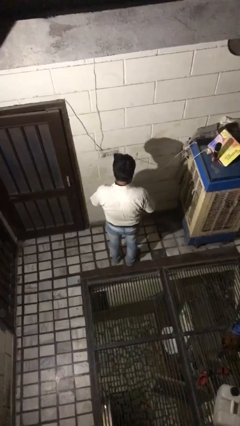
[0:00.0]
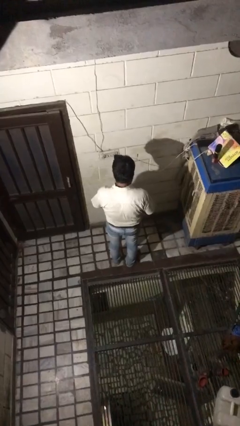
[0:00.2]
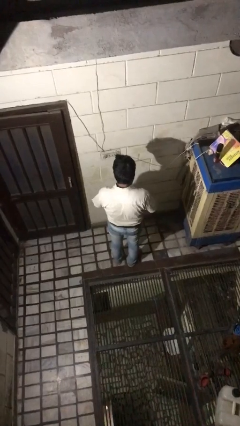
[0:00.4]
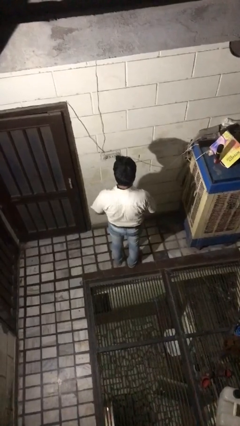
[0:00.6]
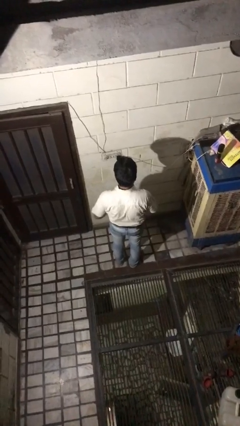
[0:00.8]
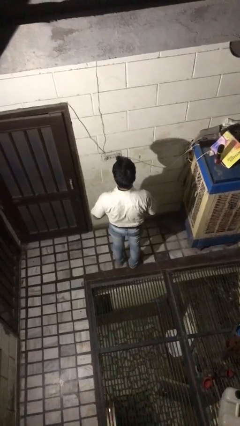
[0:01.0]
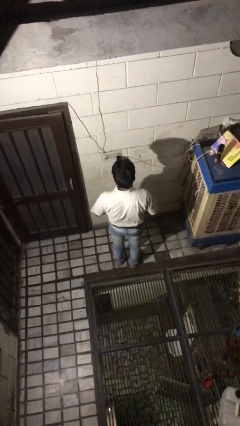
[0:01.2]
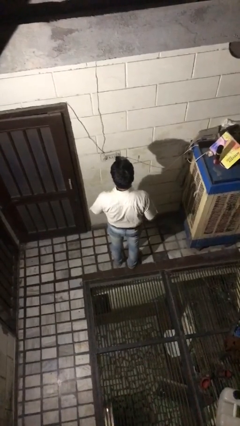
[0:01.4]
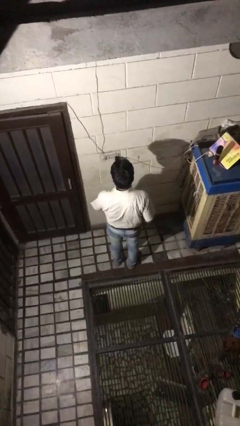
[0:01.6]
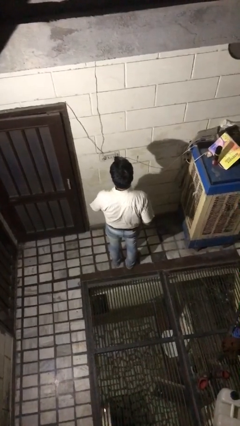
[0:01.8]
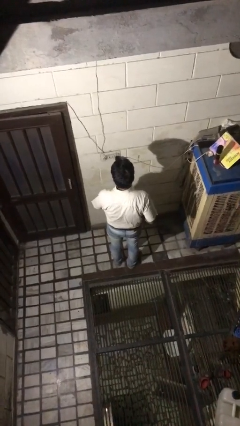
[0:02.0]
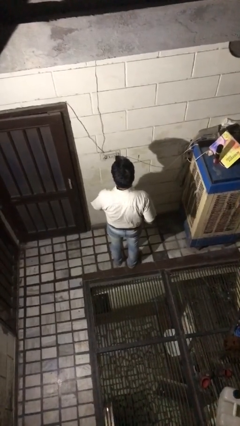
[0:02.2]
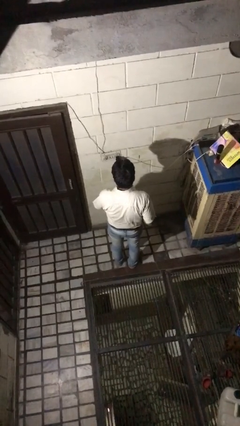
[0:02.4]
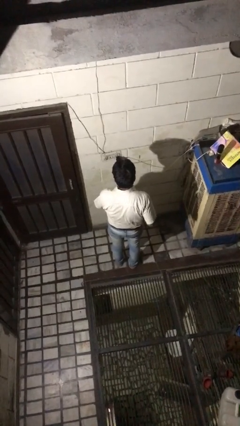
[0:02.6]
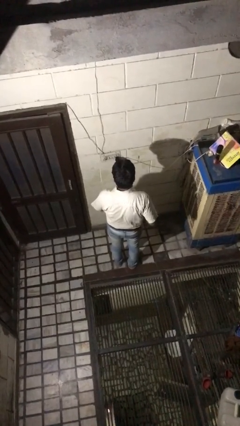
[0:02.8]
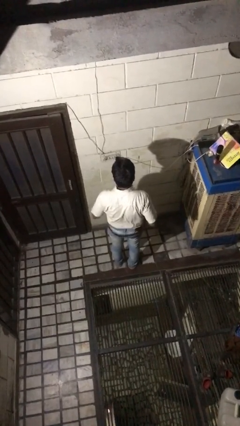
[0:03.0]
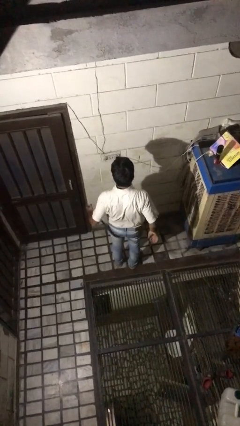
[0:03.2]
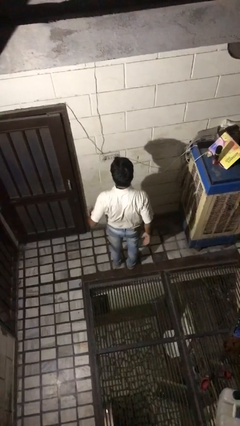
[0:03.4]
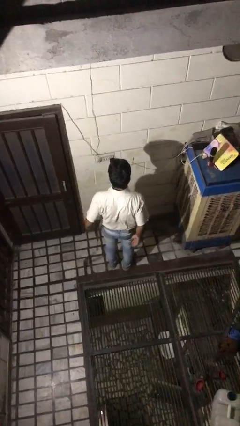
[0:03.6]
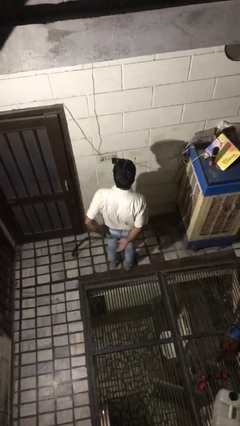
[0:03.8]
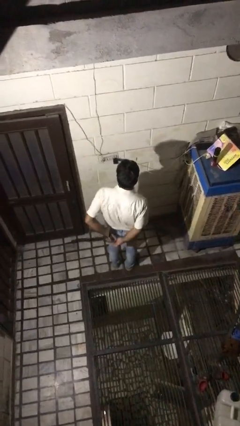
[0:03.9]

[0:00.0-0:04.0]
person takes off belt

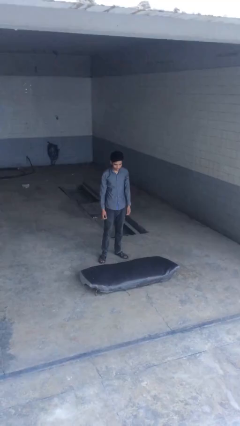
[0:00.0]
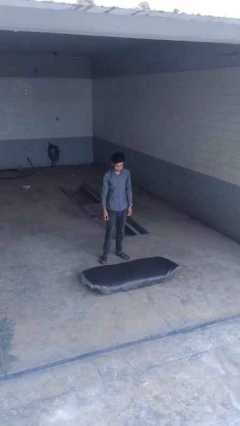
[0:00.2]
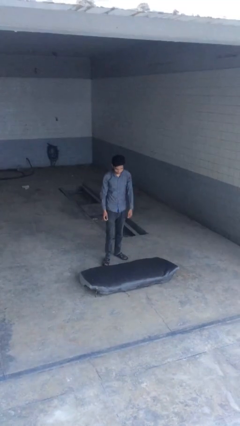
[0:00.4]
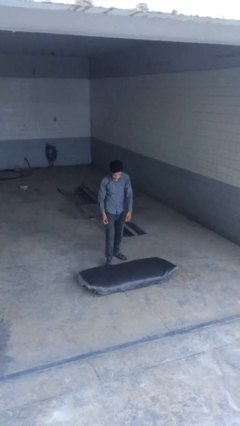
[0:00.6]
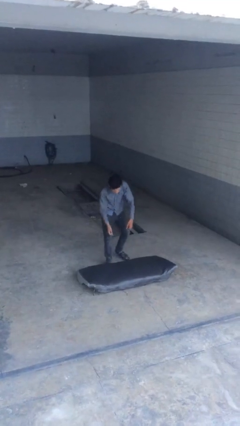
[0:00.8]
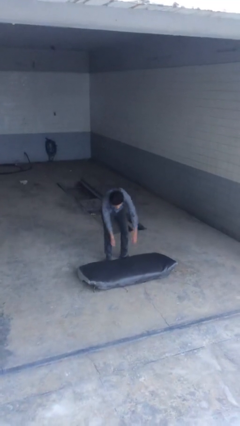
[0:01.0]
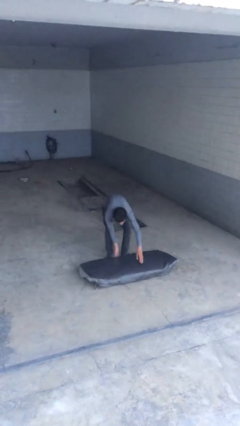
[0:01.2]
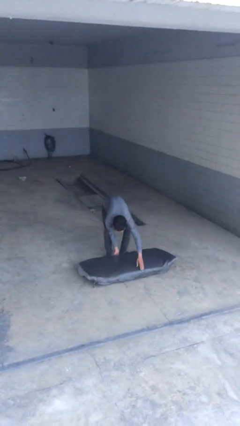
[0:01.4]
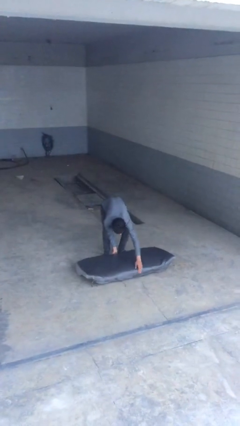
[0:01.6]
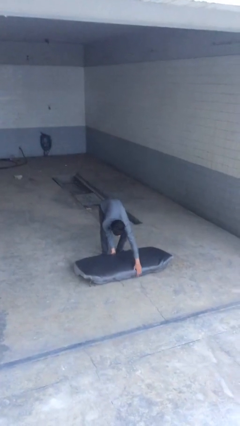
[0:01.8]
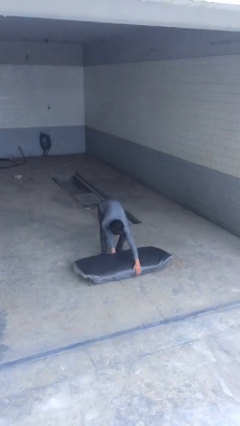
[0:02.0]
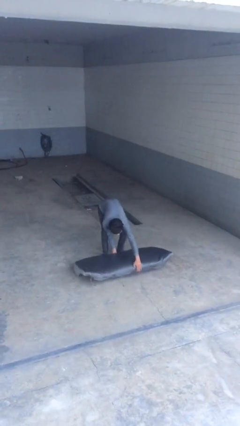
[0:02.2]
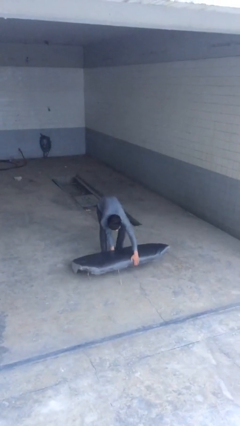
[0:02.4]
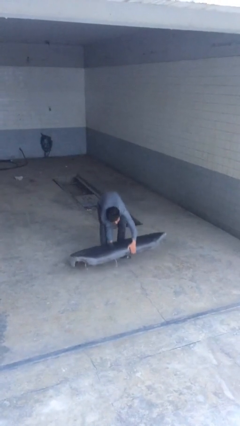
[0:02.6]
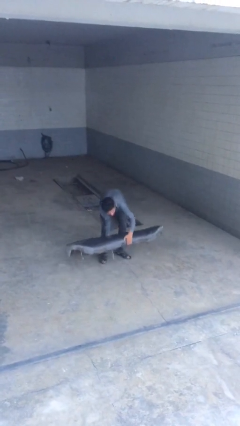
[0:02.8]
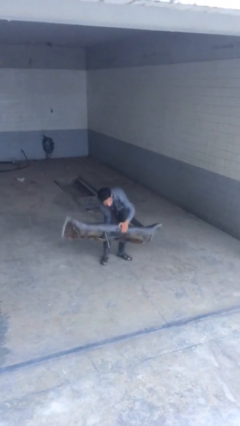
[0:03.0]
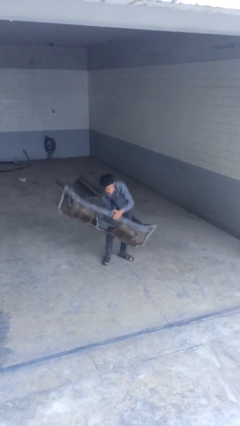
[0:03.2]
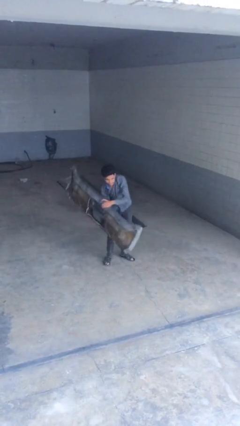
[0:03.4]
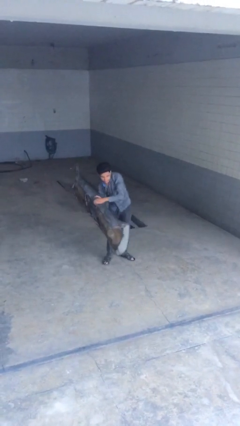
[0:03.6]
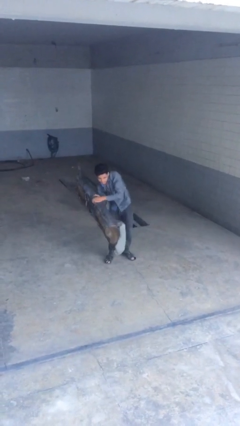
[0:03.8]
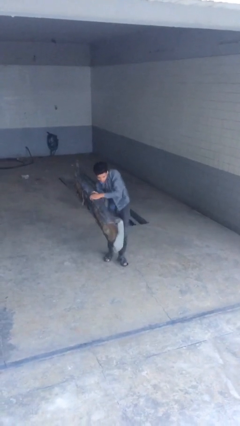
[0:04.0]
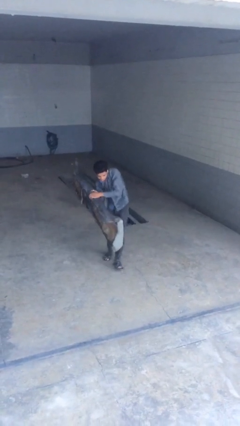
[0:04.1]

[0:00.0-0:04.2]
person picks up object from floor

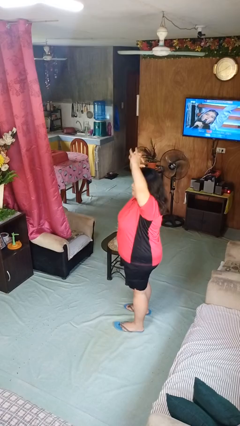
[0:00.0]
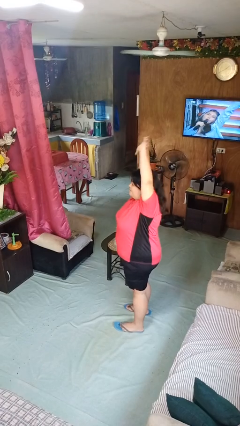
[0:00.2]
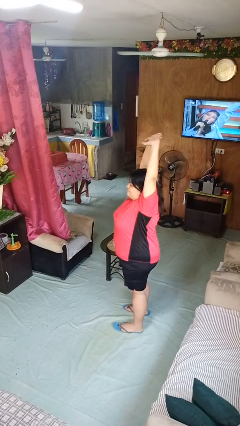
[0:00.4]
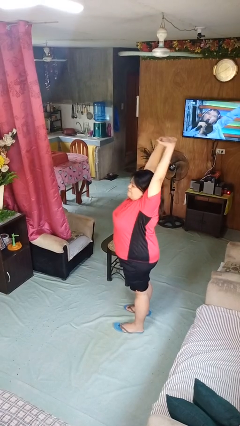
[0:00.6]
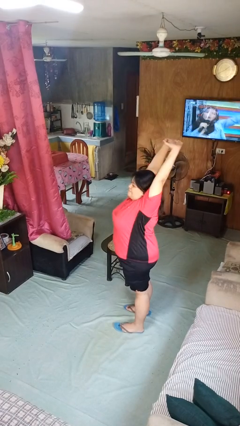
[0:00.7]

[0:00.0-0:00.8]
person stretches arms over head

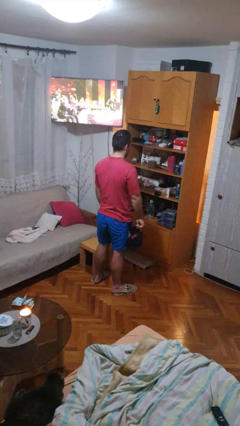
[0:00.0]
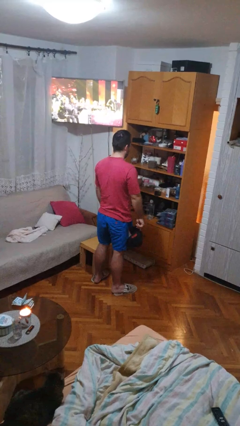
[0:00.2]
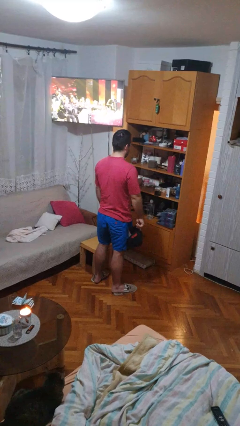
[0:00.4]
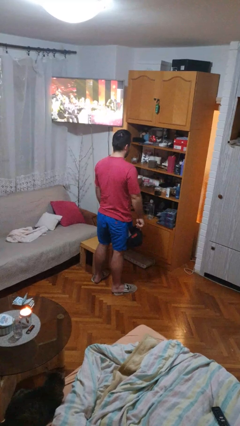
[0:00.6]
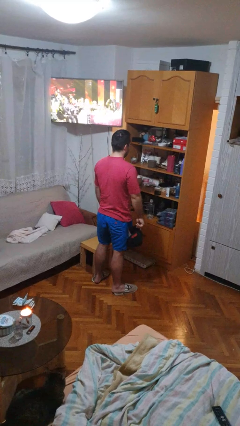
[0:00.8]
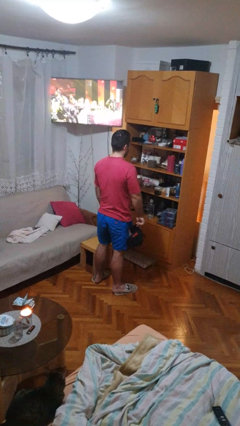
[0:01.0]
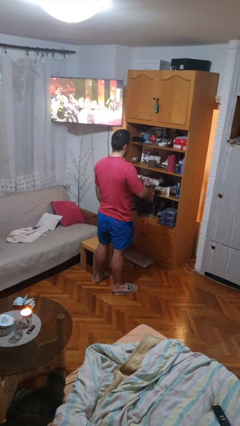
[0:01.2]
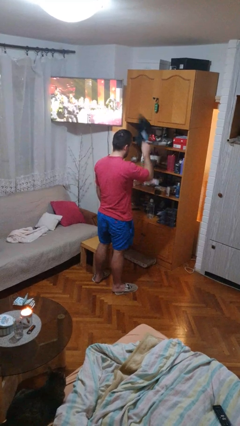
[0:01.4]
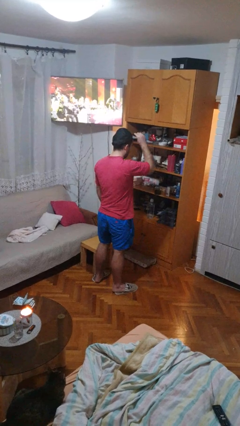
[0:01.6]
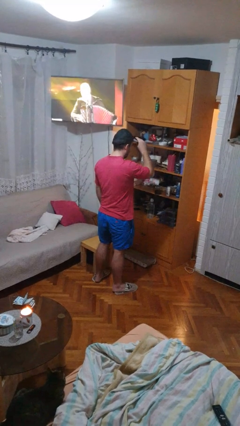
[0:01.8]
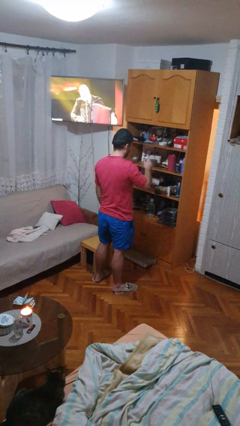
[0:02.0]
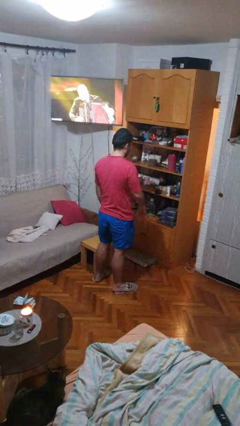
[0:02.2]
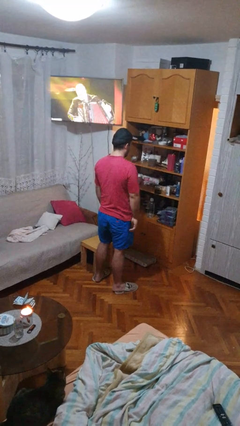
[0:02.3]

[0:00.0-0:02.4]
person puts on hat

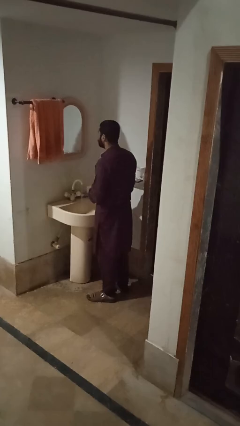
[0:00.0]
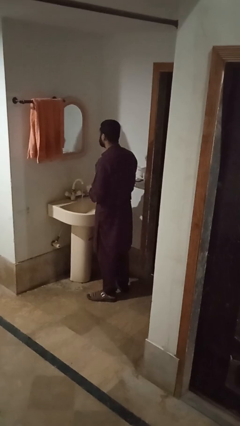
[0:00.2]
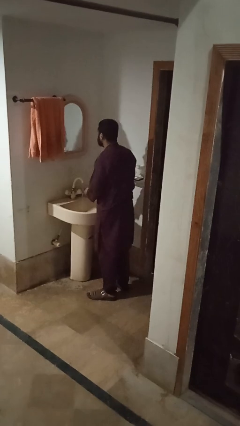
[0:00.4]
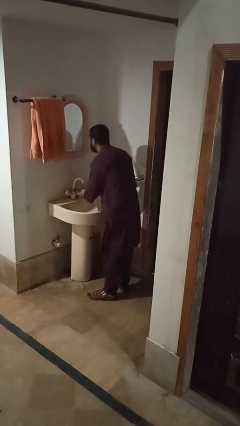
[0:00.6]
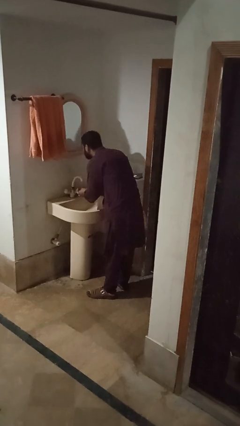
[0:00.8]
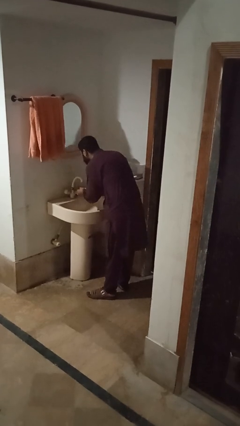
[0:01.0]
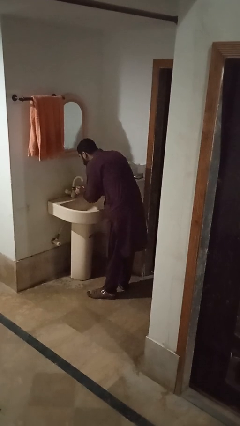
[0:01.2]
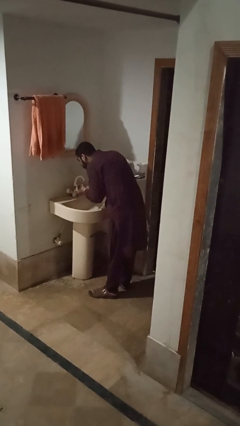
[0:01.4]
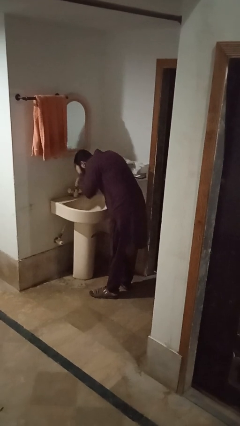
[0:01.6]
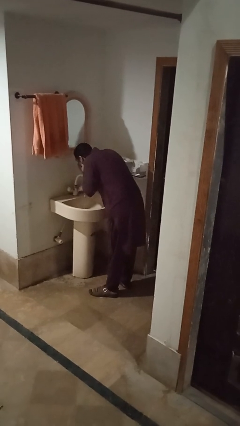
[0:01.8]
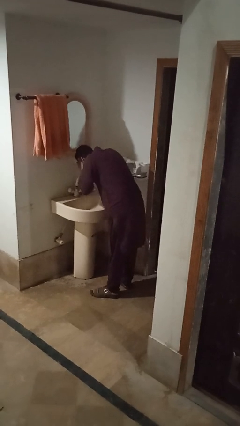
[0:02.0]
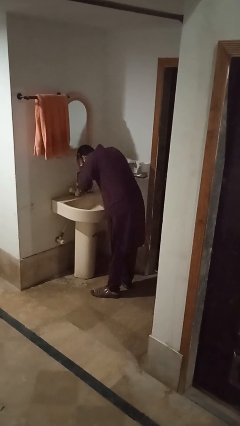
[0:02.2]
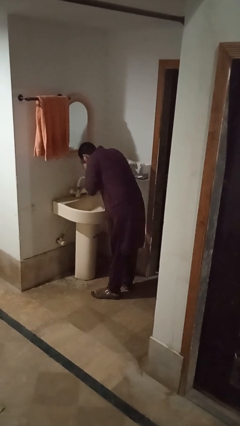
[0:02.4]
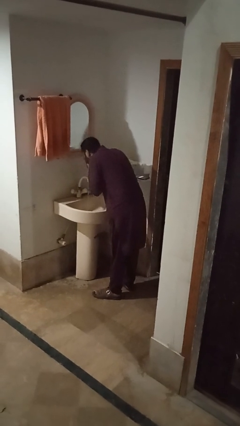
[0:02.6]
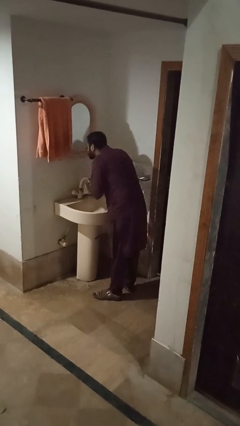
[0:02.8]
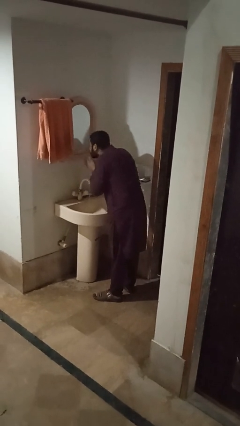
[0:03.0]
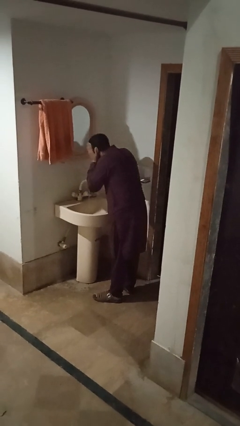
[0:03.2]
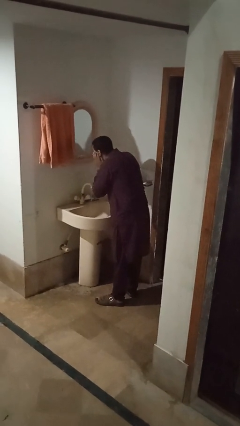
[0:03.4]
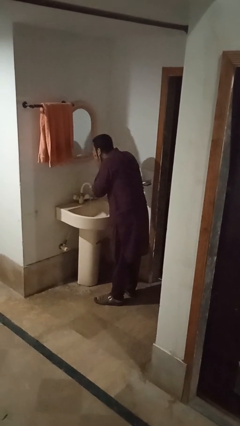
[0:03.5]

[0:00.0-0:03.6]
person washes face

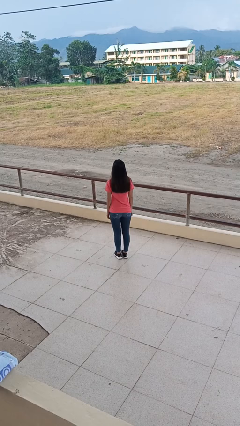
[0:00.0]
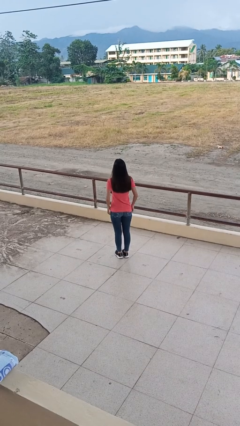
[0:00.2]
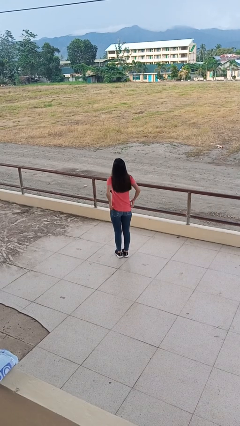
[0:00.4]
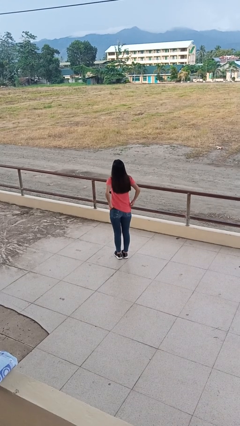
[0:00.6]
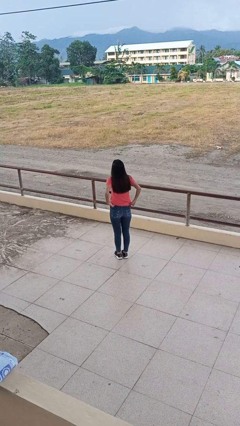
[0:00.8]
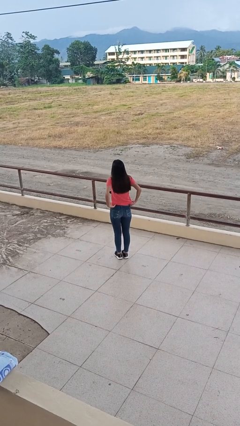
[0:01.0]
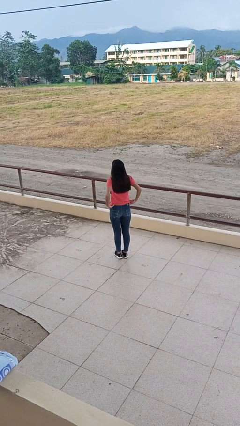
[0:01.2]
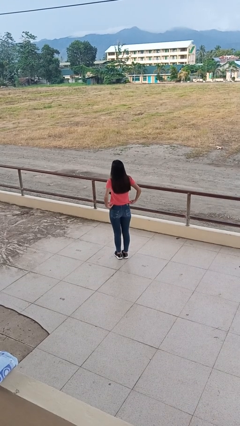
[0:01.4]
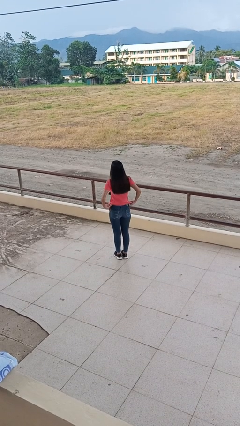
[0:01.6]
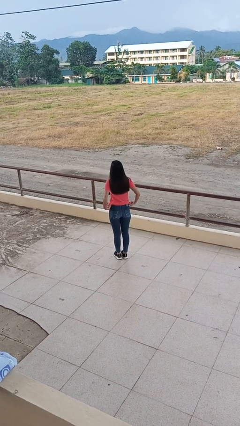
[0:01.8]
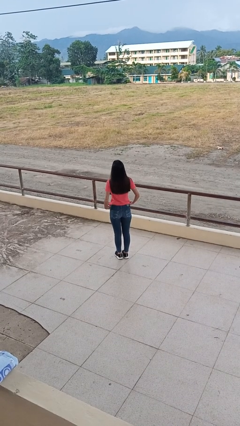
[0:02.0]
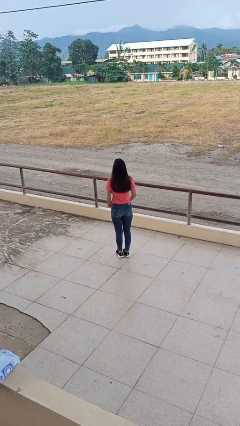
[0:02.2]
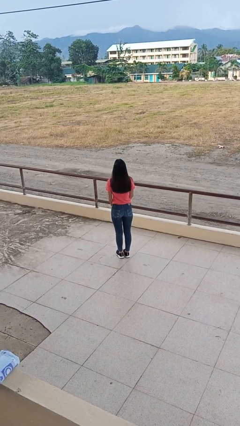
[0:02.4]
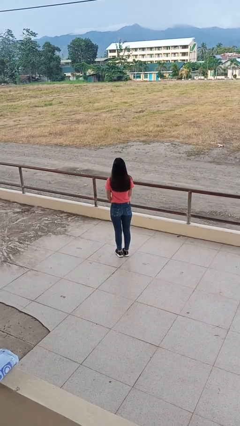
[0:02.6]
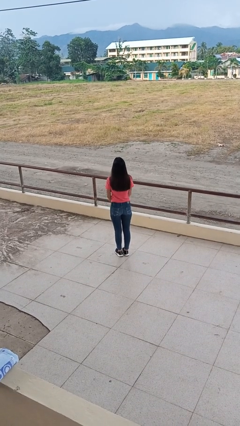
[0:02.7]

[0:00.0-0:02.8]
person tucks in shirt
